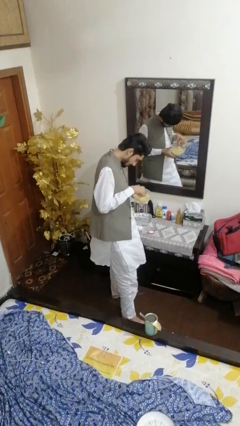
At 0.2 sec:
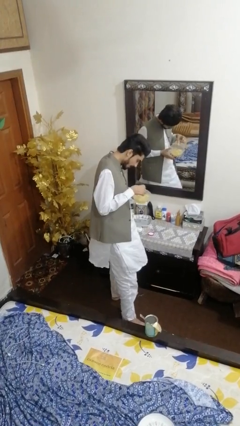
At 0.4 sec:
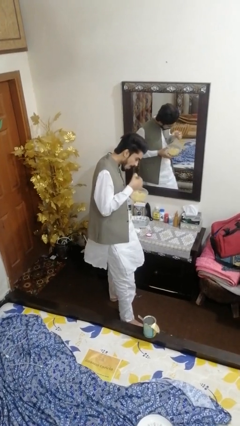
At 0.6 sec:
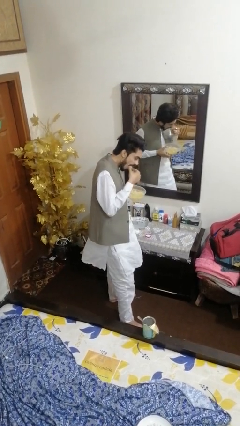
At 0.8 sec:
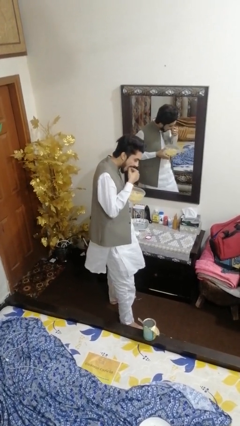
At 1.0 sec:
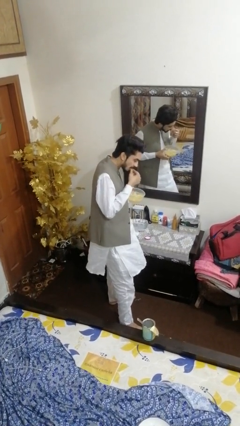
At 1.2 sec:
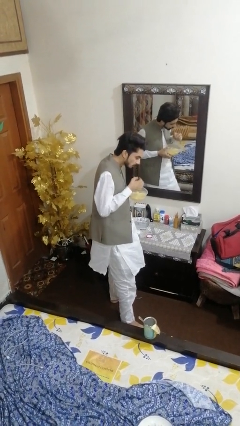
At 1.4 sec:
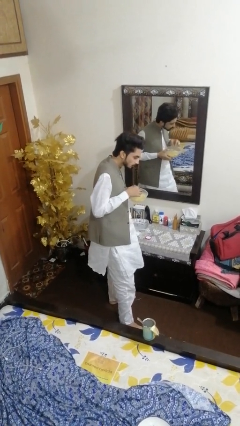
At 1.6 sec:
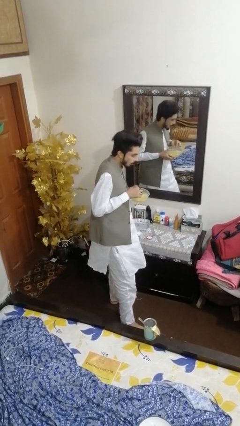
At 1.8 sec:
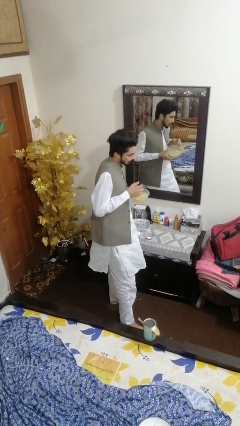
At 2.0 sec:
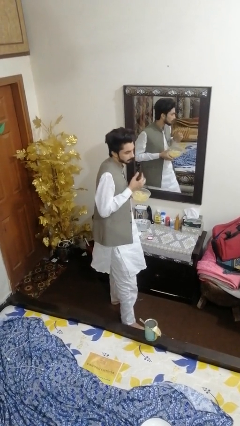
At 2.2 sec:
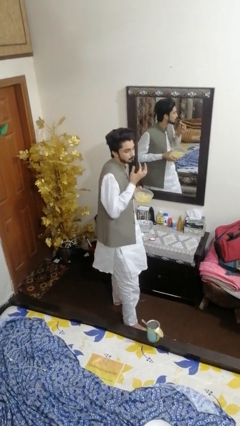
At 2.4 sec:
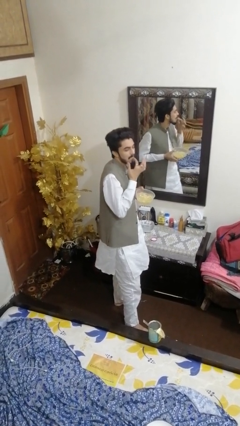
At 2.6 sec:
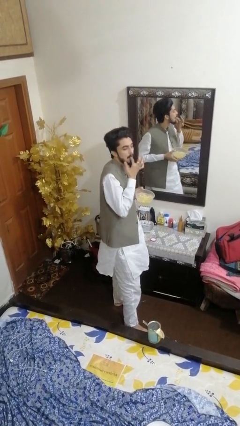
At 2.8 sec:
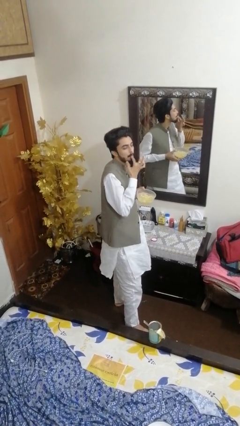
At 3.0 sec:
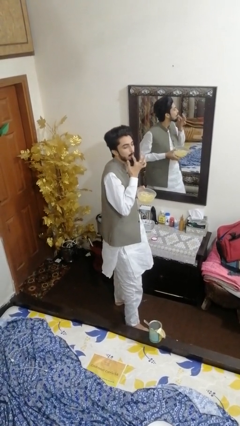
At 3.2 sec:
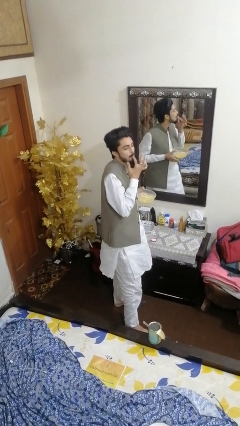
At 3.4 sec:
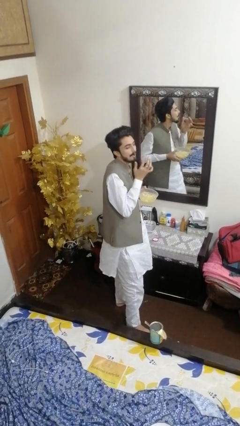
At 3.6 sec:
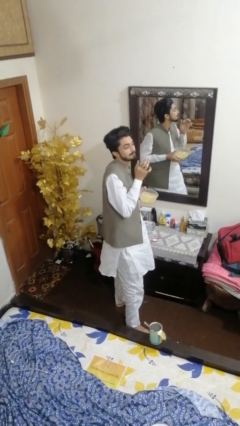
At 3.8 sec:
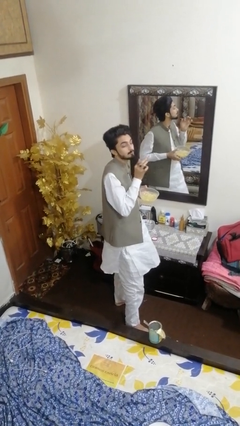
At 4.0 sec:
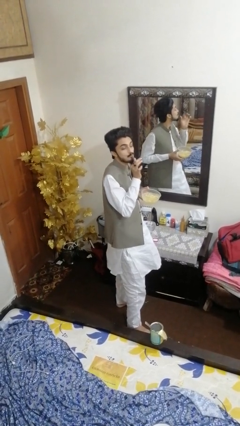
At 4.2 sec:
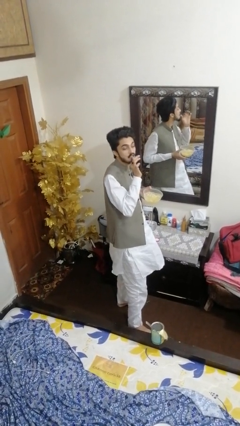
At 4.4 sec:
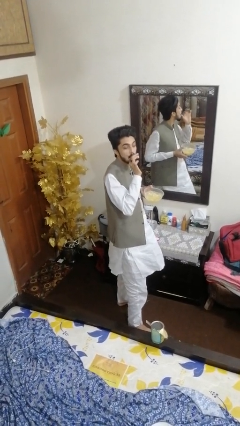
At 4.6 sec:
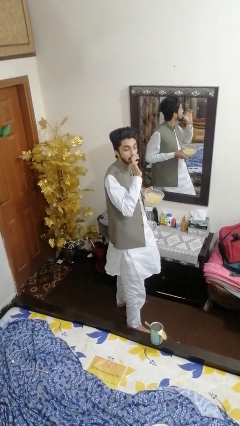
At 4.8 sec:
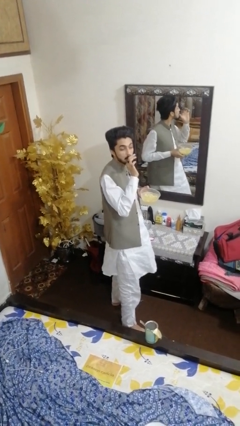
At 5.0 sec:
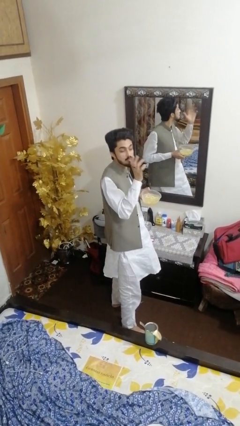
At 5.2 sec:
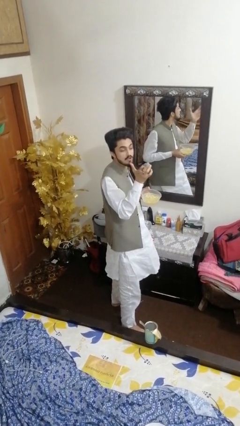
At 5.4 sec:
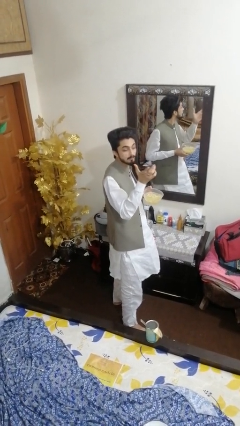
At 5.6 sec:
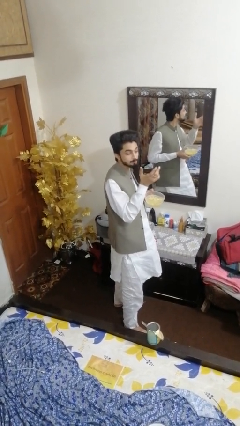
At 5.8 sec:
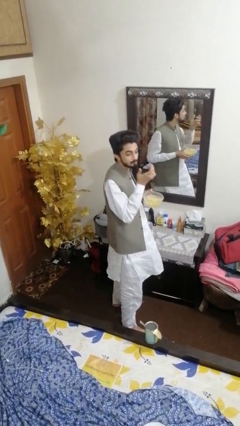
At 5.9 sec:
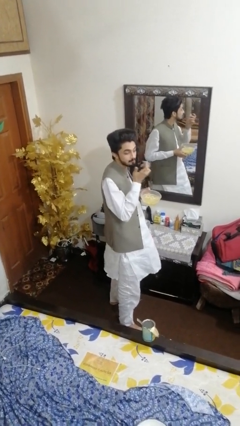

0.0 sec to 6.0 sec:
person licks fingers

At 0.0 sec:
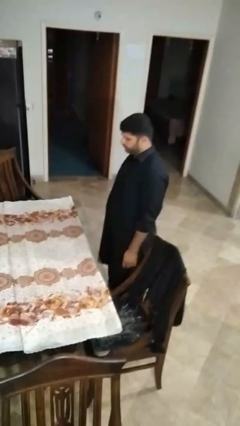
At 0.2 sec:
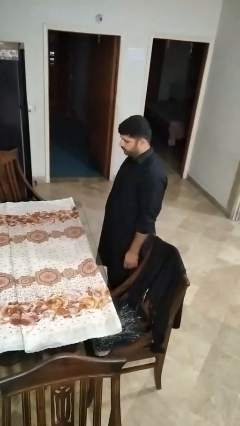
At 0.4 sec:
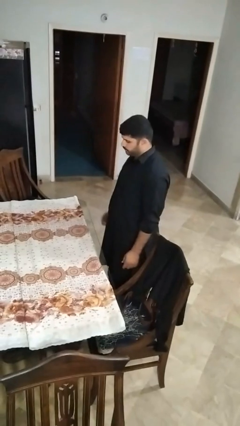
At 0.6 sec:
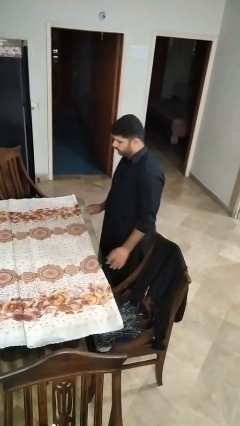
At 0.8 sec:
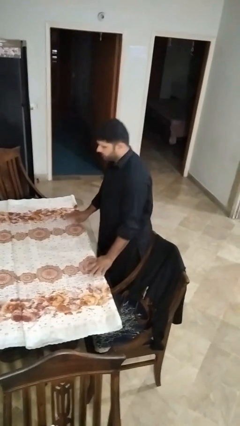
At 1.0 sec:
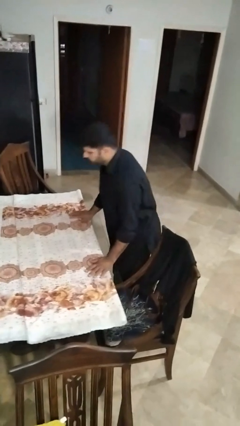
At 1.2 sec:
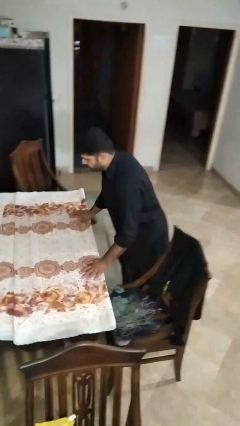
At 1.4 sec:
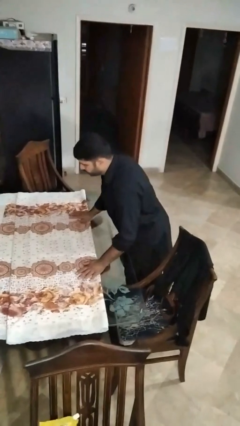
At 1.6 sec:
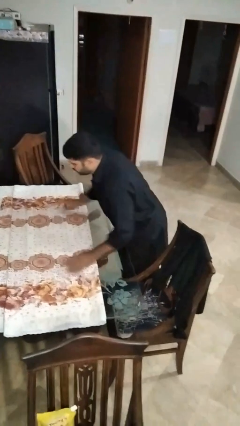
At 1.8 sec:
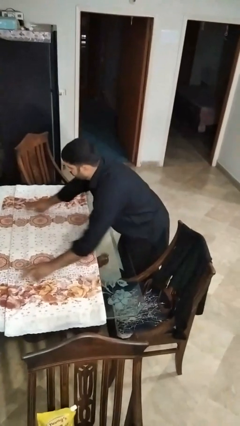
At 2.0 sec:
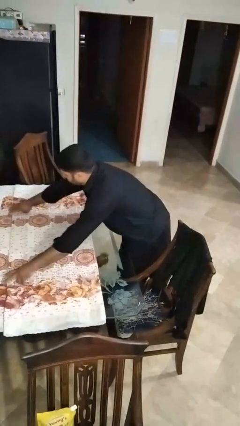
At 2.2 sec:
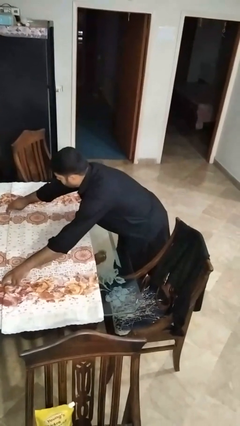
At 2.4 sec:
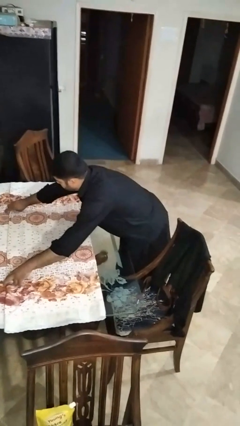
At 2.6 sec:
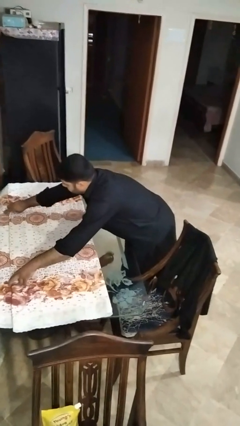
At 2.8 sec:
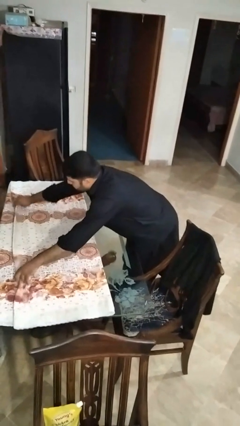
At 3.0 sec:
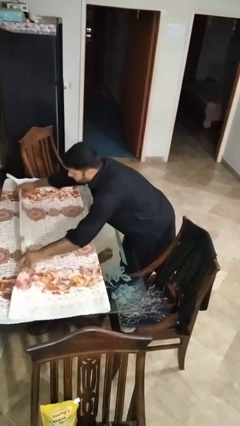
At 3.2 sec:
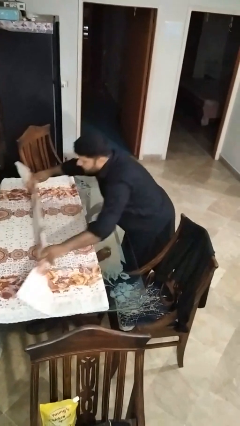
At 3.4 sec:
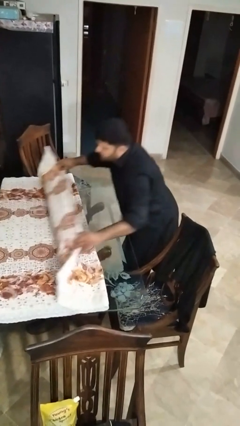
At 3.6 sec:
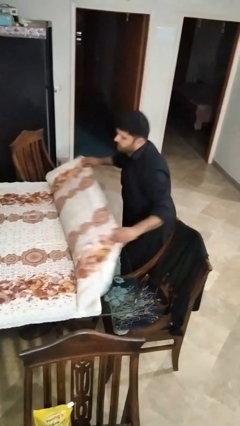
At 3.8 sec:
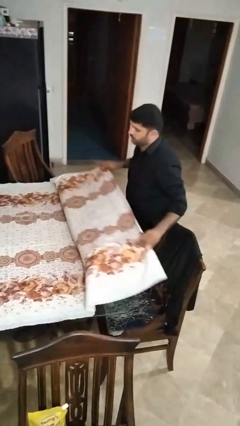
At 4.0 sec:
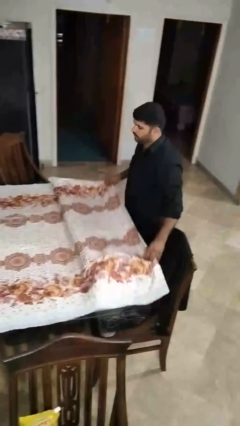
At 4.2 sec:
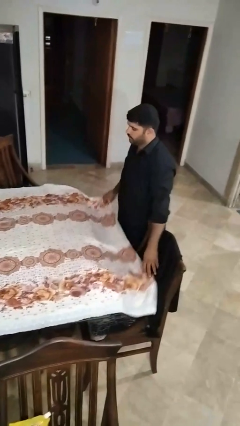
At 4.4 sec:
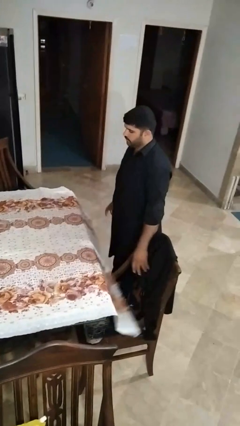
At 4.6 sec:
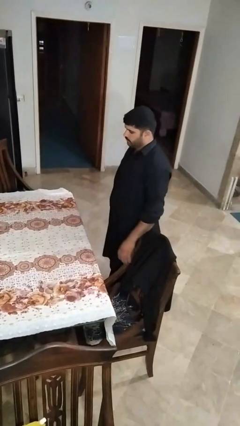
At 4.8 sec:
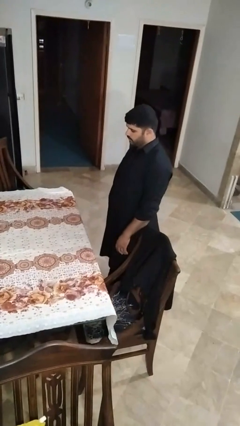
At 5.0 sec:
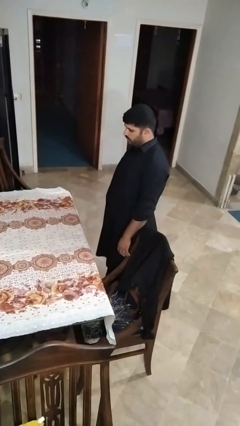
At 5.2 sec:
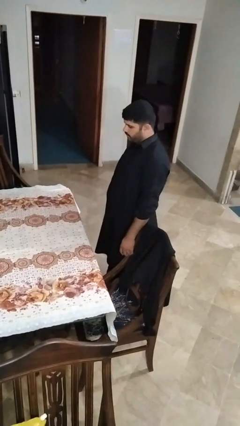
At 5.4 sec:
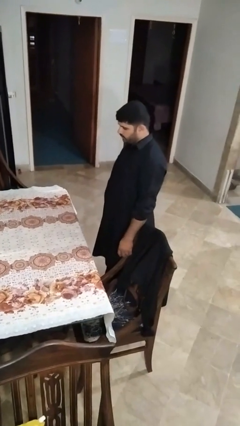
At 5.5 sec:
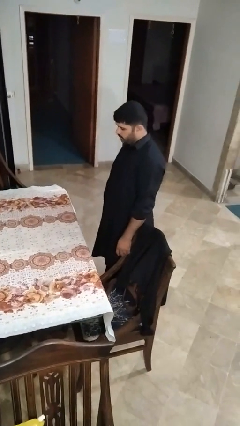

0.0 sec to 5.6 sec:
person spreads tablecloth

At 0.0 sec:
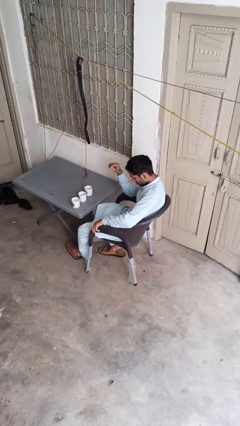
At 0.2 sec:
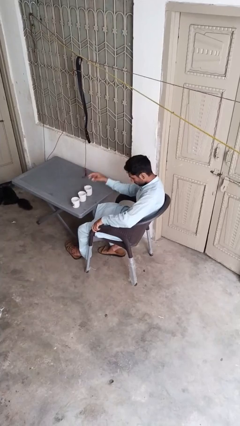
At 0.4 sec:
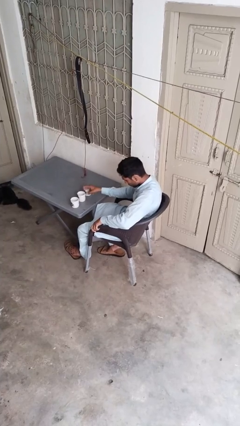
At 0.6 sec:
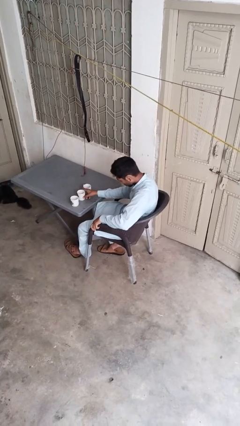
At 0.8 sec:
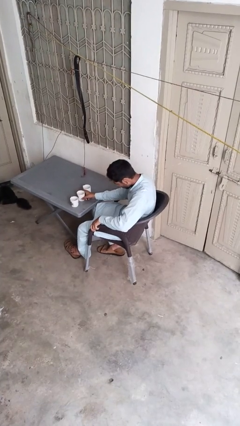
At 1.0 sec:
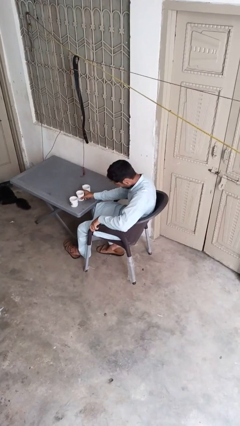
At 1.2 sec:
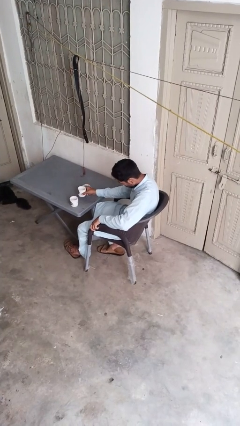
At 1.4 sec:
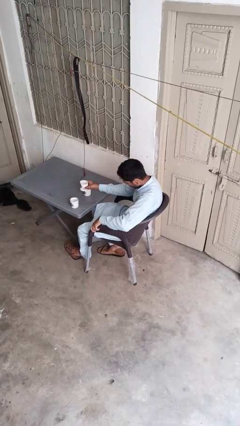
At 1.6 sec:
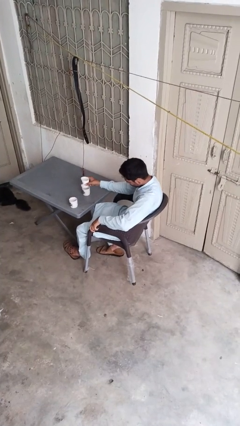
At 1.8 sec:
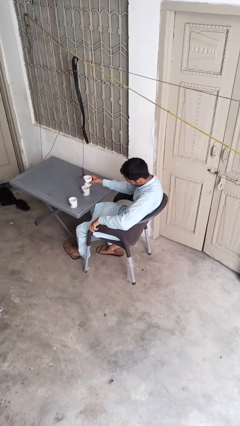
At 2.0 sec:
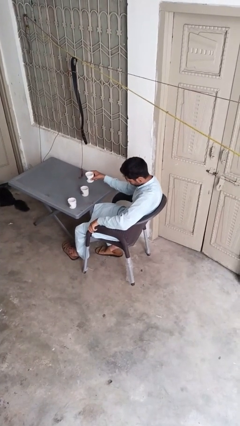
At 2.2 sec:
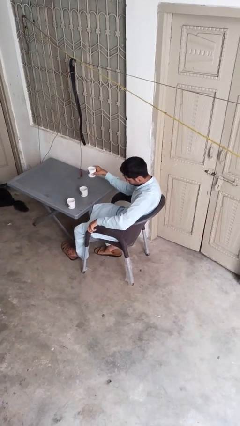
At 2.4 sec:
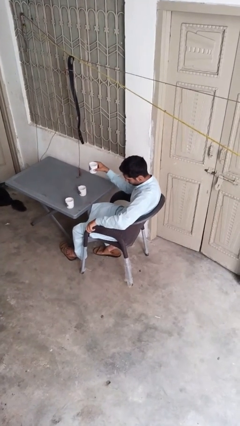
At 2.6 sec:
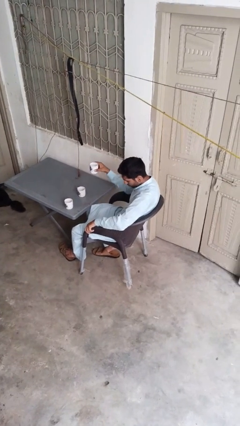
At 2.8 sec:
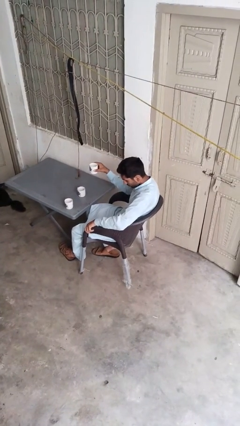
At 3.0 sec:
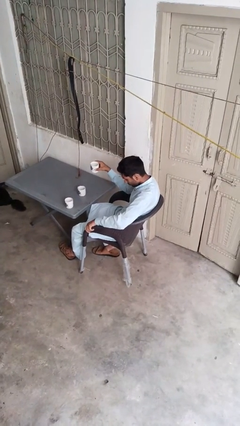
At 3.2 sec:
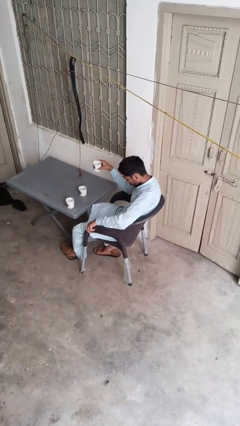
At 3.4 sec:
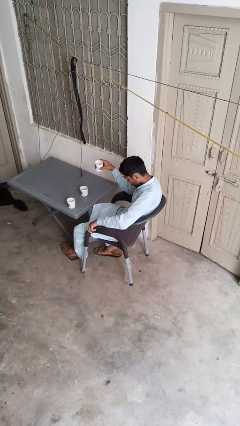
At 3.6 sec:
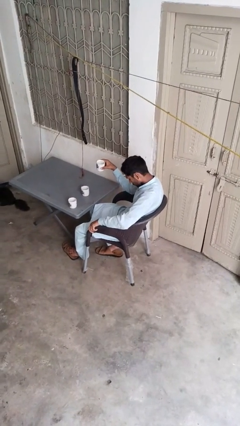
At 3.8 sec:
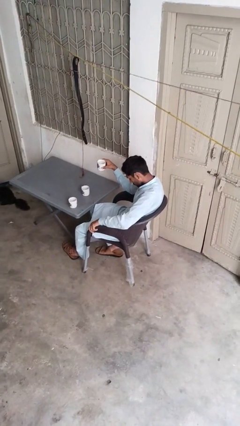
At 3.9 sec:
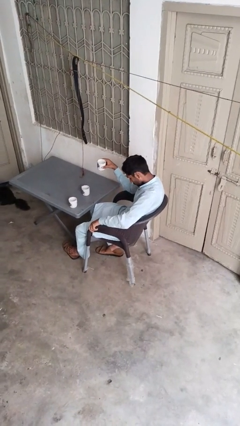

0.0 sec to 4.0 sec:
person picks up object from table

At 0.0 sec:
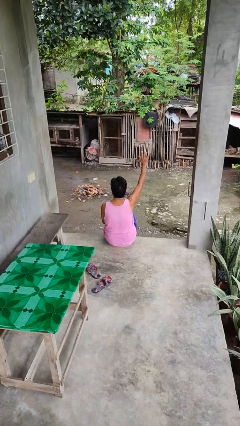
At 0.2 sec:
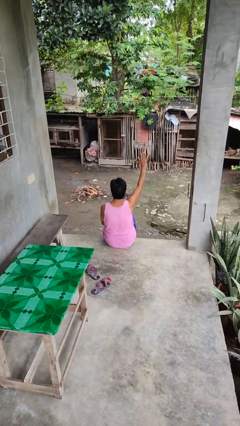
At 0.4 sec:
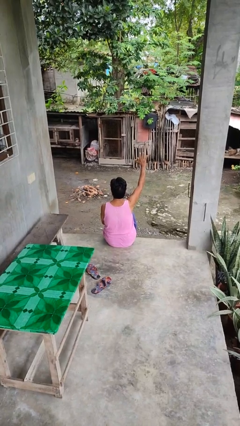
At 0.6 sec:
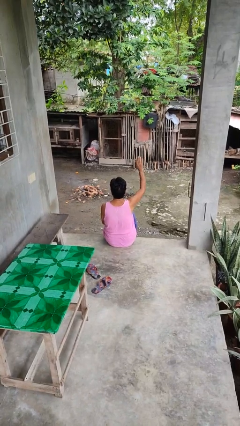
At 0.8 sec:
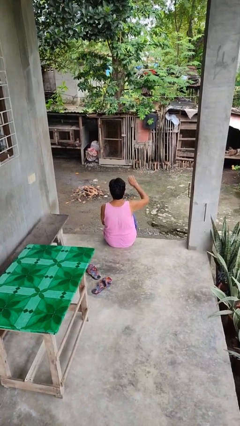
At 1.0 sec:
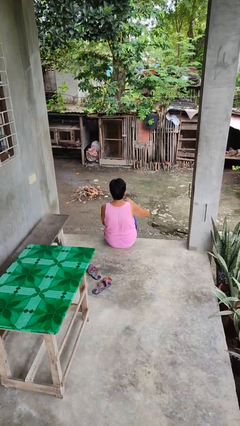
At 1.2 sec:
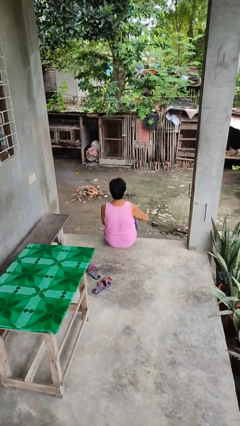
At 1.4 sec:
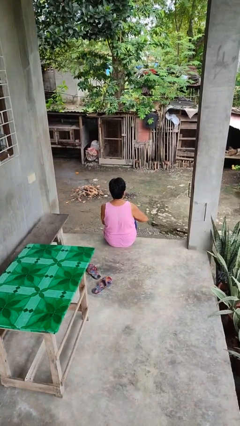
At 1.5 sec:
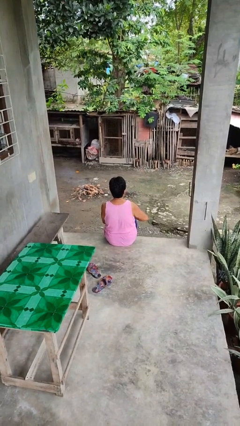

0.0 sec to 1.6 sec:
person gestures swipe down

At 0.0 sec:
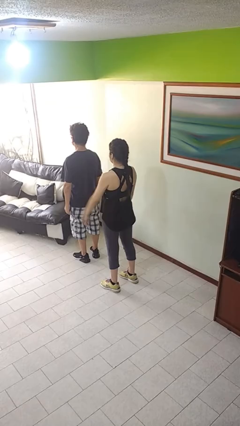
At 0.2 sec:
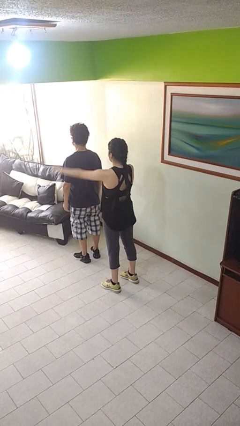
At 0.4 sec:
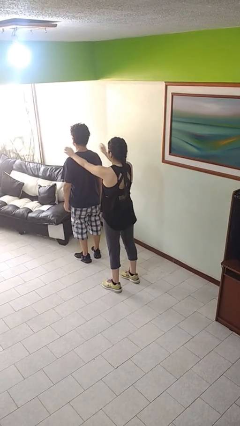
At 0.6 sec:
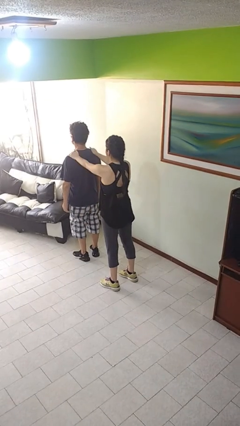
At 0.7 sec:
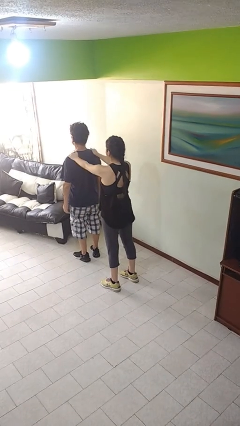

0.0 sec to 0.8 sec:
person grabs person by shoulder
